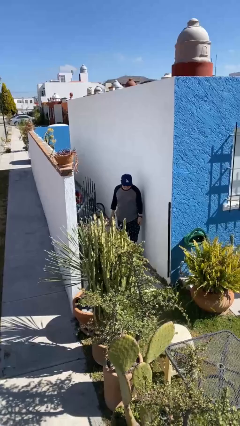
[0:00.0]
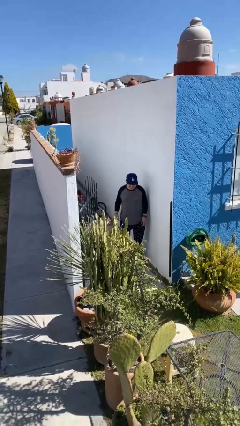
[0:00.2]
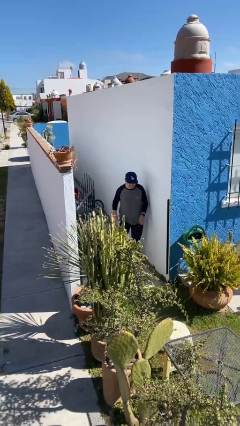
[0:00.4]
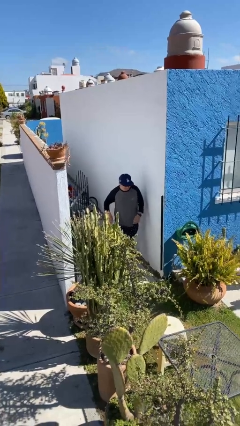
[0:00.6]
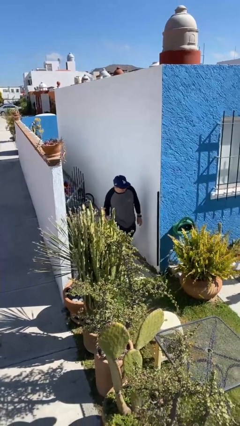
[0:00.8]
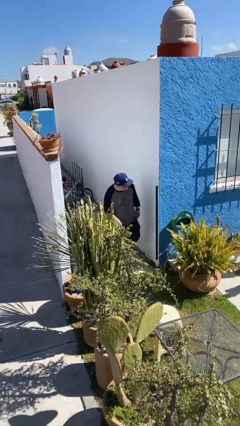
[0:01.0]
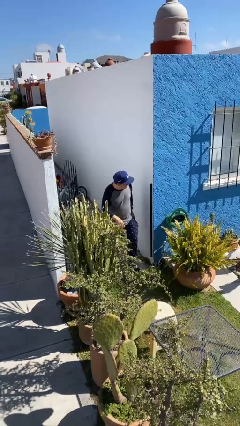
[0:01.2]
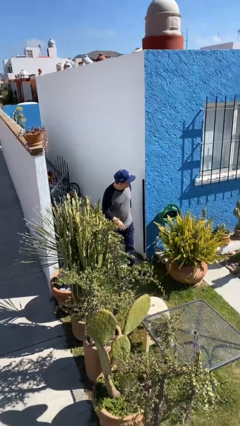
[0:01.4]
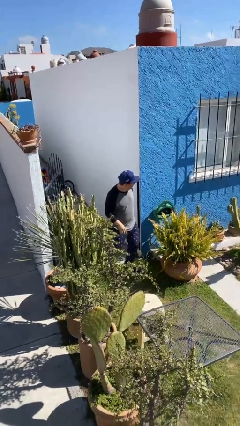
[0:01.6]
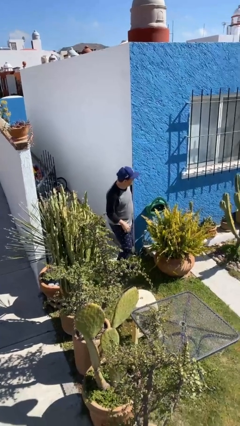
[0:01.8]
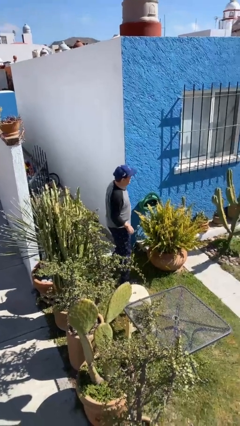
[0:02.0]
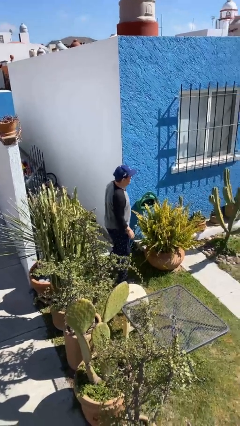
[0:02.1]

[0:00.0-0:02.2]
person enters scene through structure

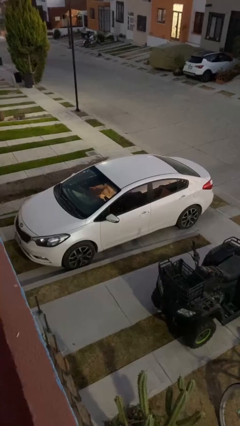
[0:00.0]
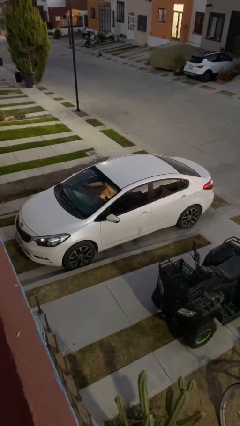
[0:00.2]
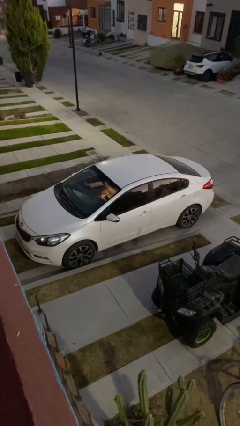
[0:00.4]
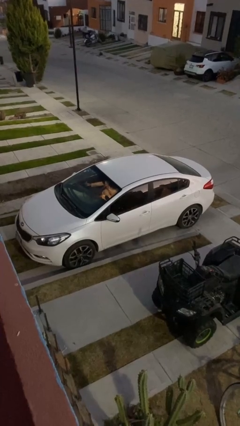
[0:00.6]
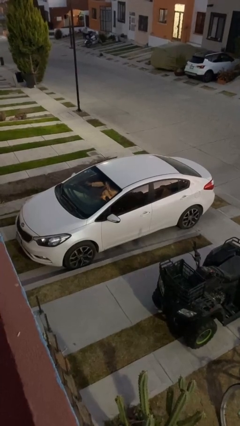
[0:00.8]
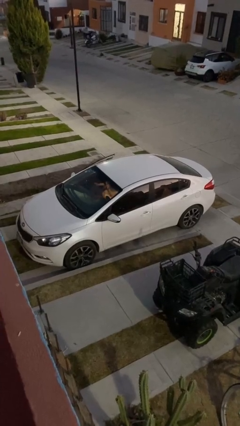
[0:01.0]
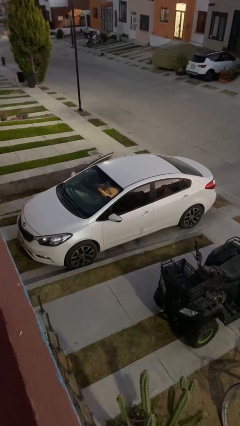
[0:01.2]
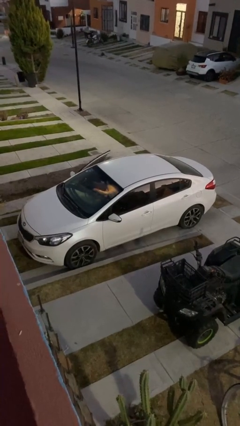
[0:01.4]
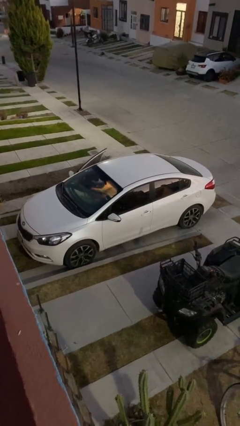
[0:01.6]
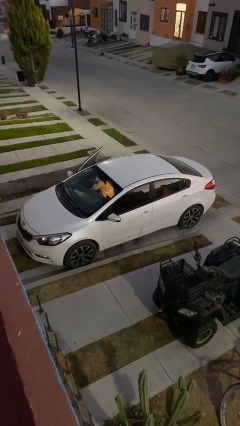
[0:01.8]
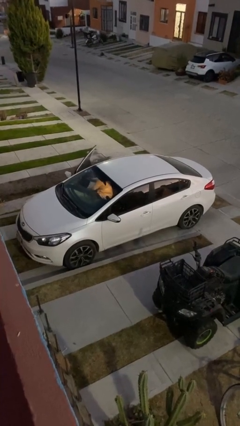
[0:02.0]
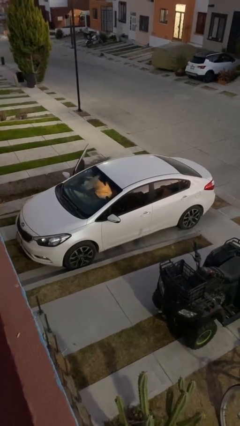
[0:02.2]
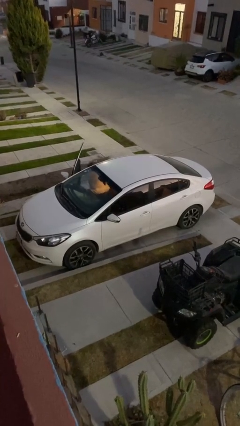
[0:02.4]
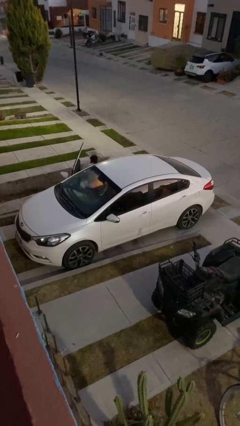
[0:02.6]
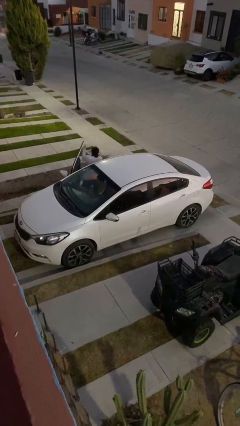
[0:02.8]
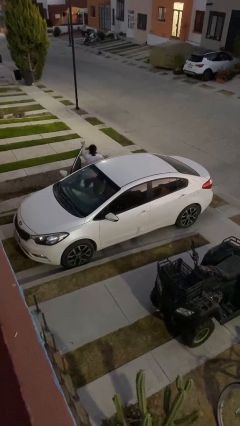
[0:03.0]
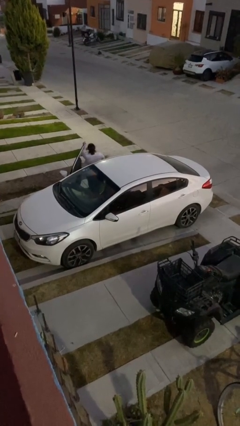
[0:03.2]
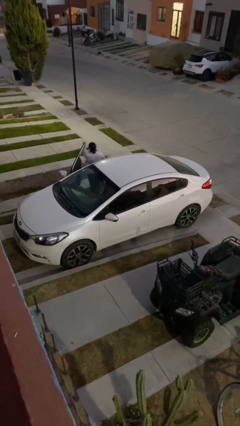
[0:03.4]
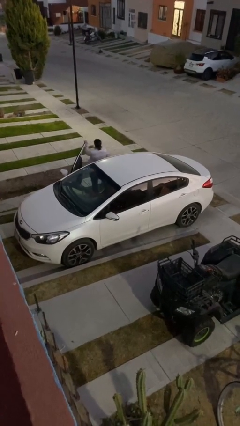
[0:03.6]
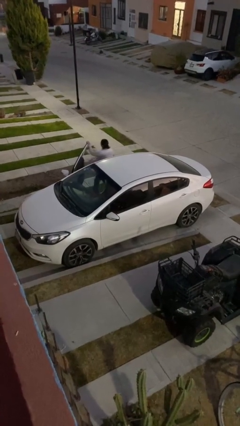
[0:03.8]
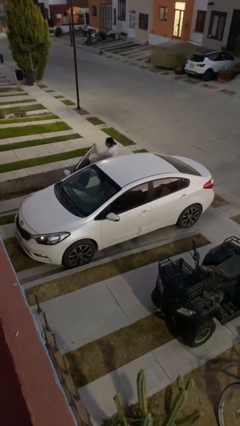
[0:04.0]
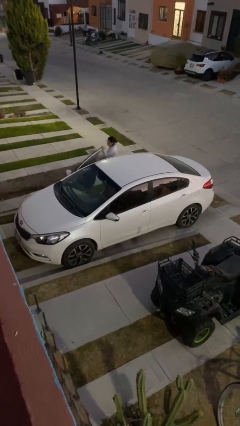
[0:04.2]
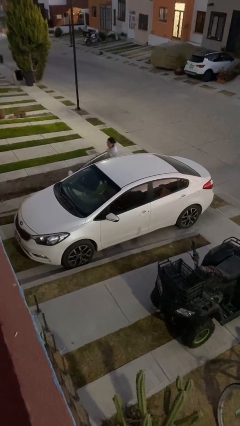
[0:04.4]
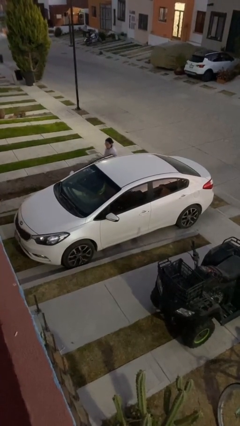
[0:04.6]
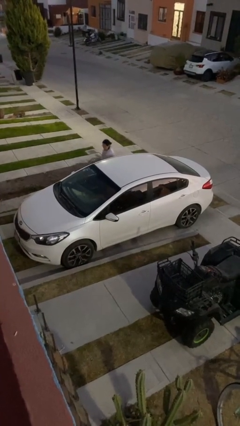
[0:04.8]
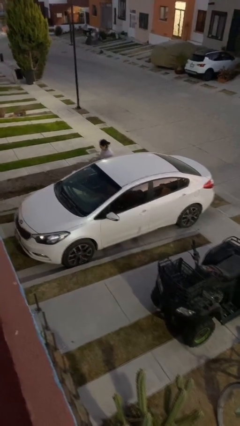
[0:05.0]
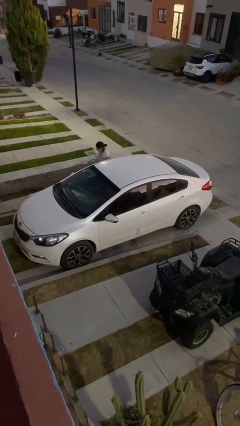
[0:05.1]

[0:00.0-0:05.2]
car drops off person

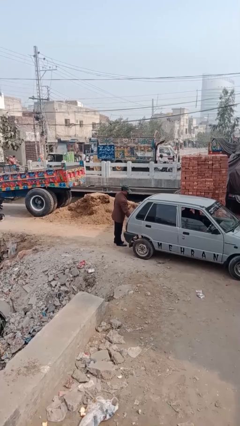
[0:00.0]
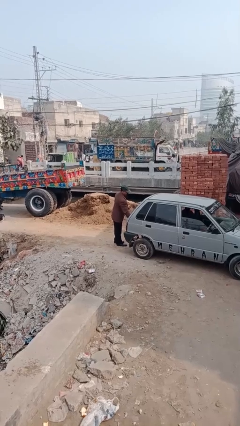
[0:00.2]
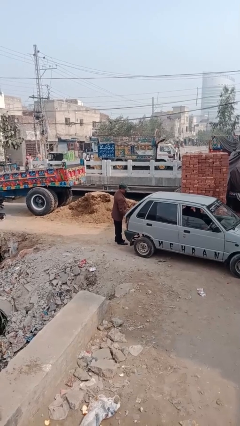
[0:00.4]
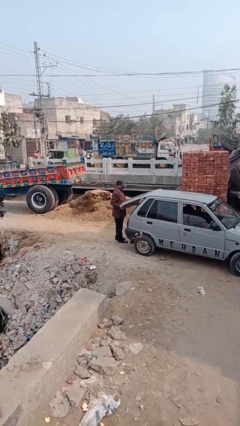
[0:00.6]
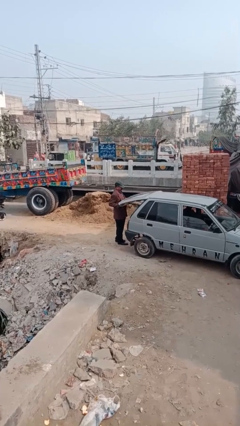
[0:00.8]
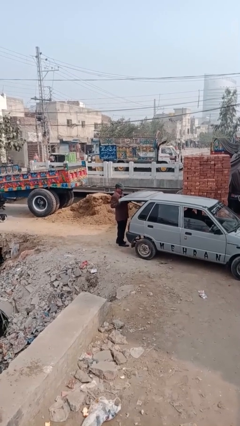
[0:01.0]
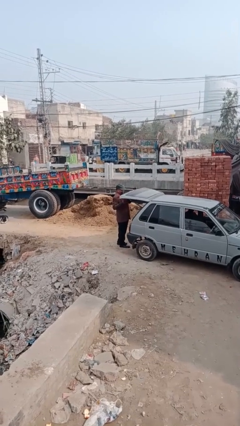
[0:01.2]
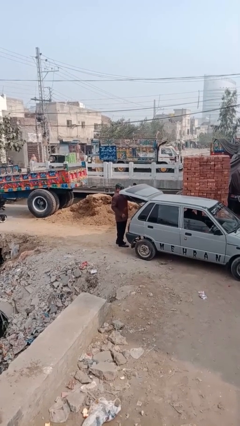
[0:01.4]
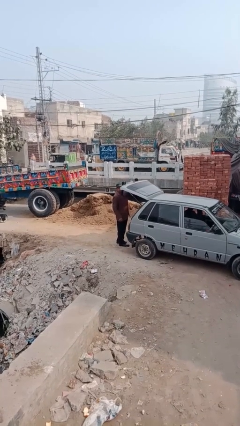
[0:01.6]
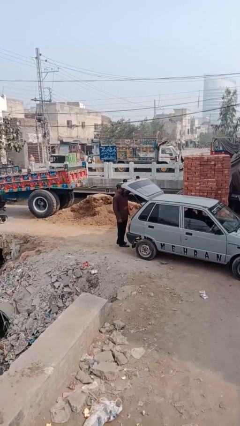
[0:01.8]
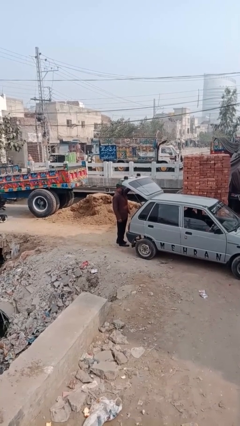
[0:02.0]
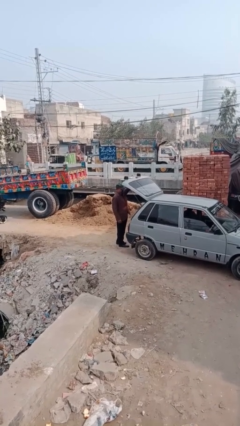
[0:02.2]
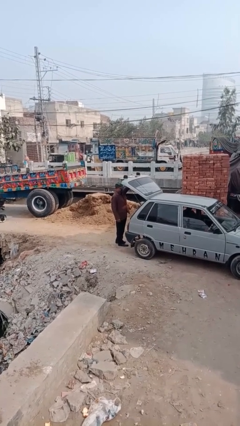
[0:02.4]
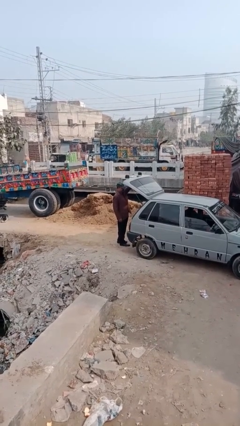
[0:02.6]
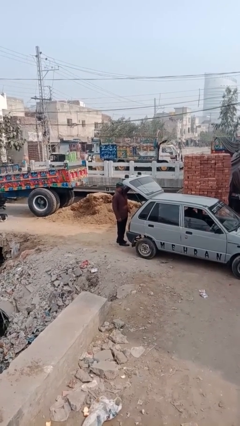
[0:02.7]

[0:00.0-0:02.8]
person opens car trunk

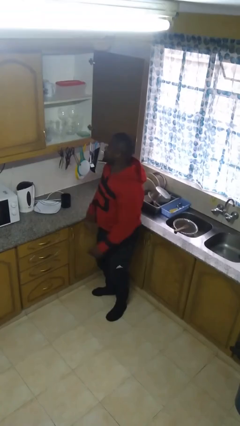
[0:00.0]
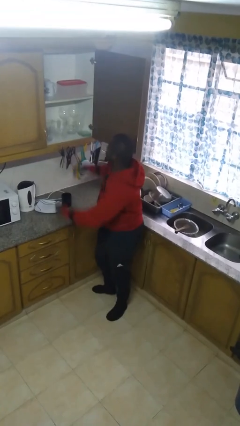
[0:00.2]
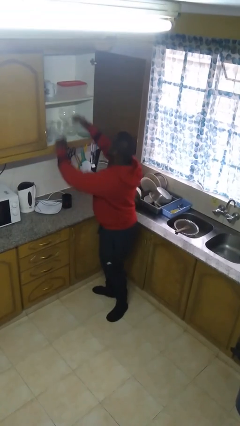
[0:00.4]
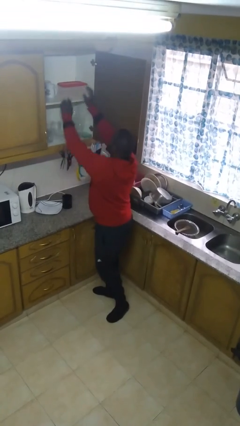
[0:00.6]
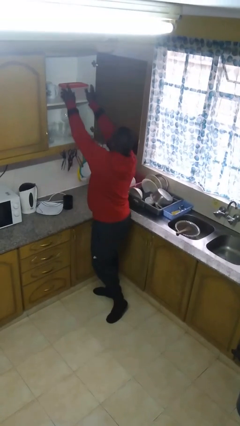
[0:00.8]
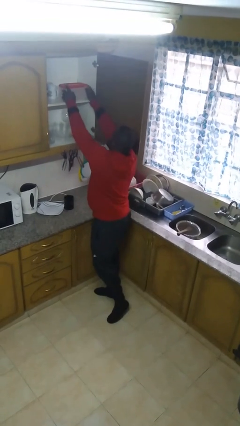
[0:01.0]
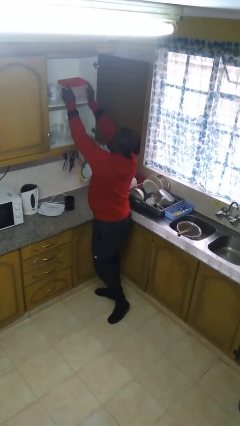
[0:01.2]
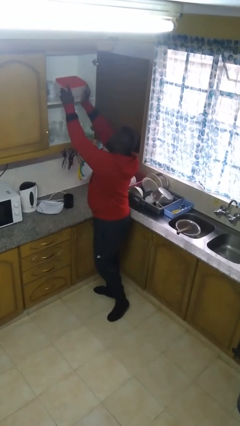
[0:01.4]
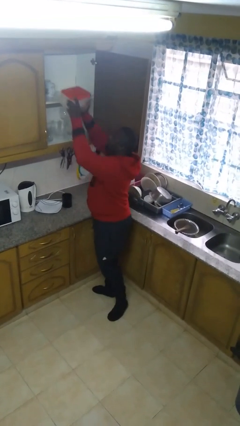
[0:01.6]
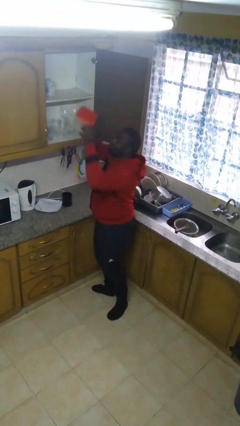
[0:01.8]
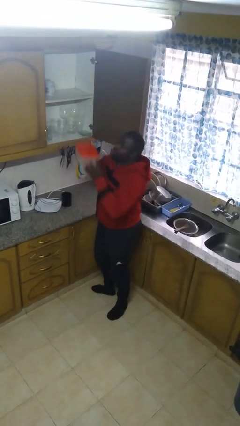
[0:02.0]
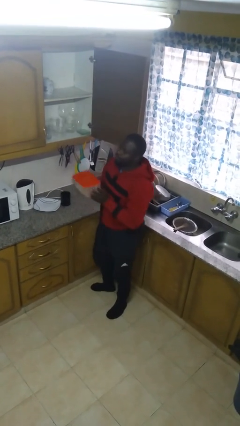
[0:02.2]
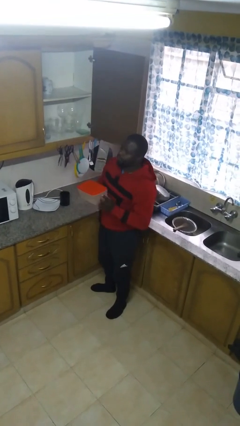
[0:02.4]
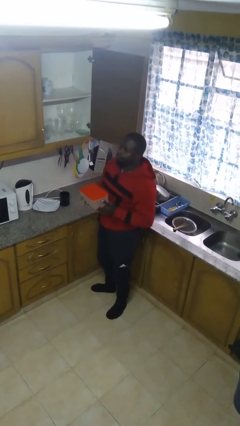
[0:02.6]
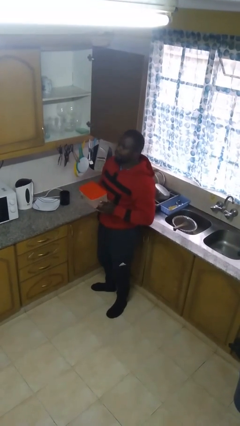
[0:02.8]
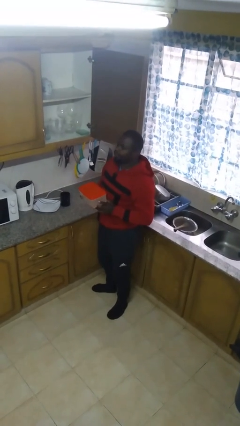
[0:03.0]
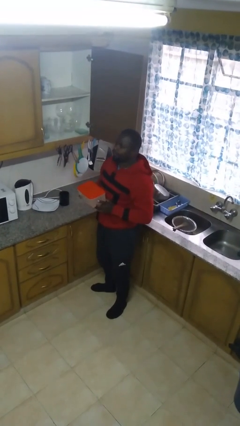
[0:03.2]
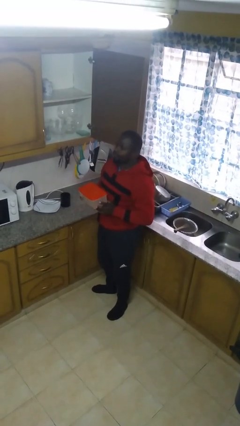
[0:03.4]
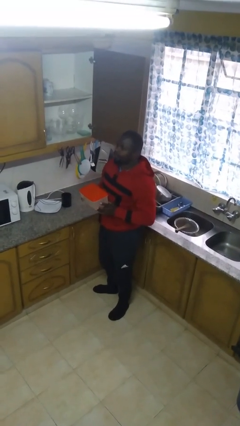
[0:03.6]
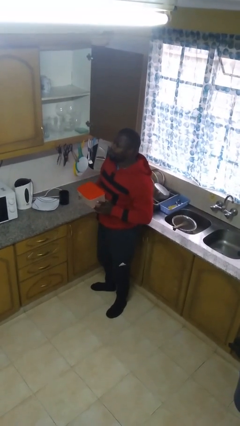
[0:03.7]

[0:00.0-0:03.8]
person picks up object from cabinet

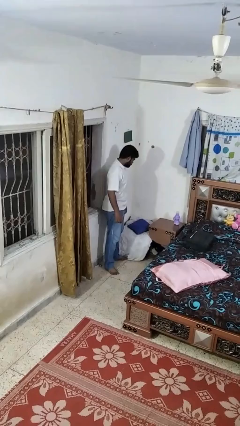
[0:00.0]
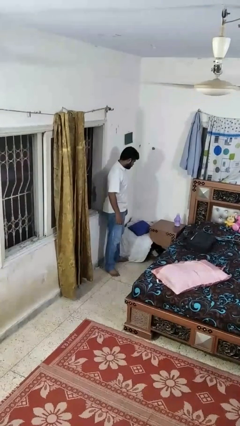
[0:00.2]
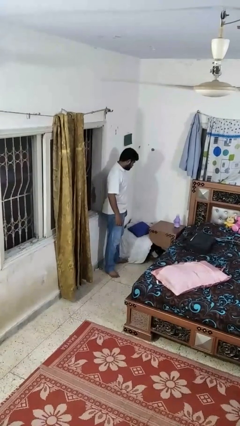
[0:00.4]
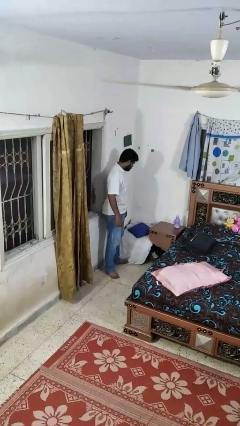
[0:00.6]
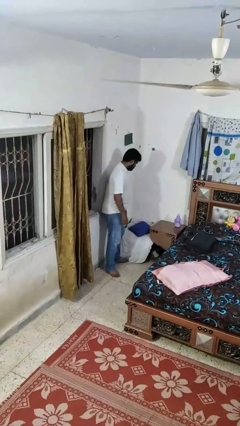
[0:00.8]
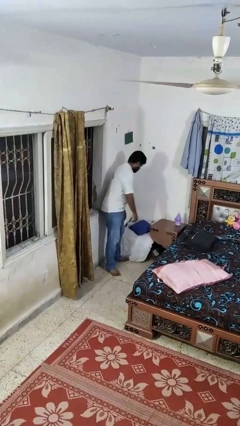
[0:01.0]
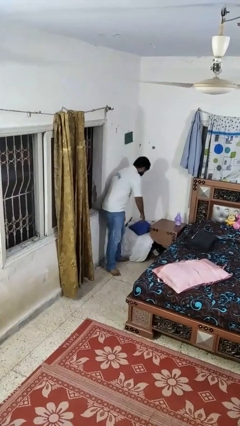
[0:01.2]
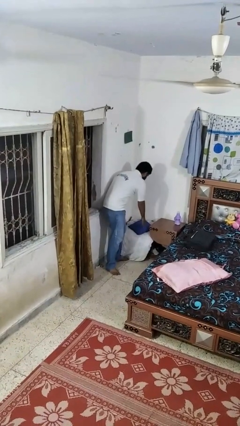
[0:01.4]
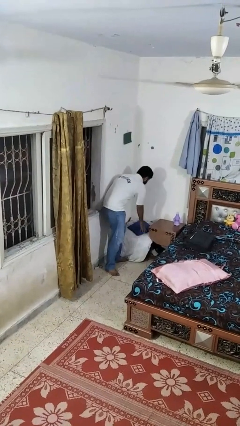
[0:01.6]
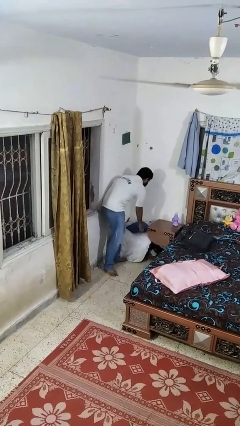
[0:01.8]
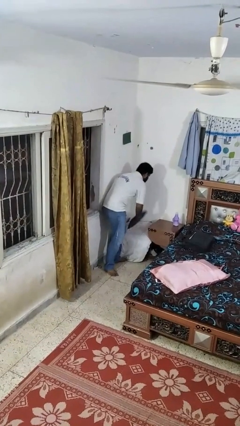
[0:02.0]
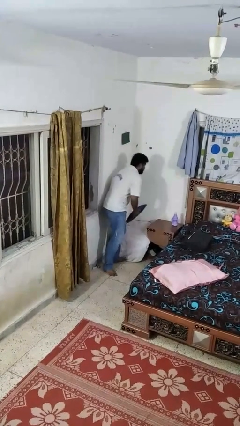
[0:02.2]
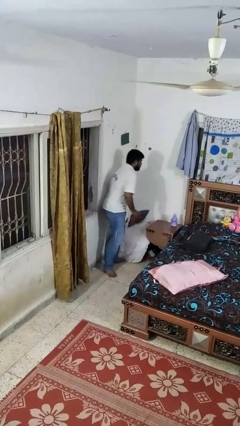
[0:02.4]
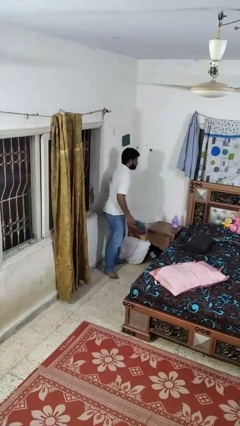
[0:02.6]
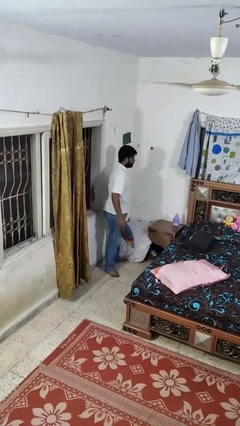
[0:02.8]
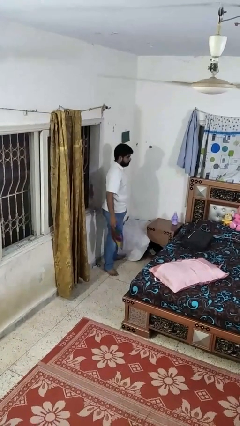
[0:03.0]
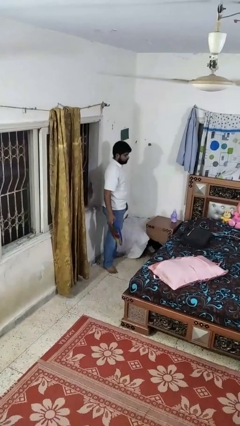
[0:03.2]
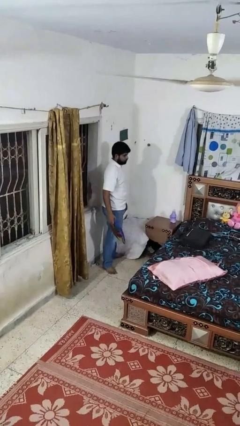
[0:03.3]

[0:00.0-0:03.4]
person picks up object from couch

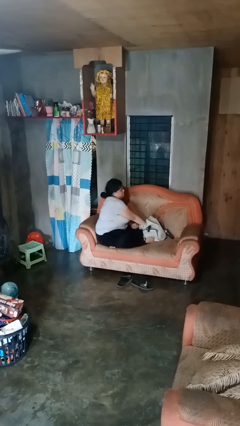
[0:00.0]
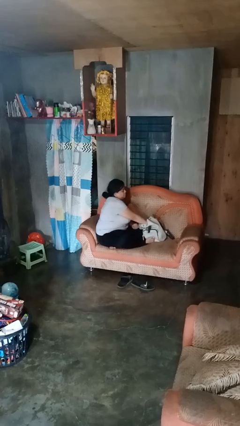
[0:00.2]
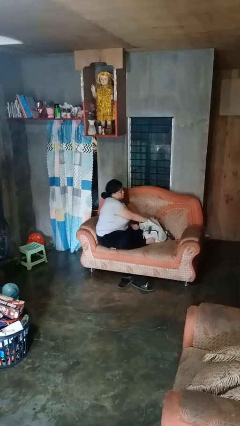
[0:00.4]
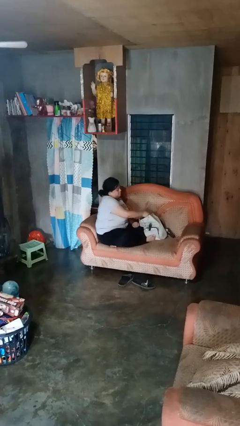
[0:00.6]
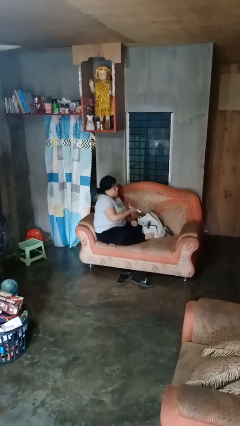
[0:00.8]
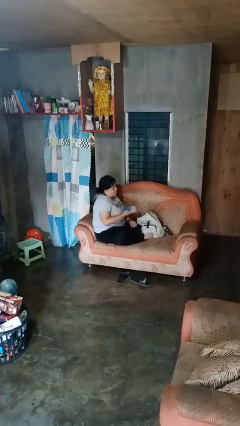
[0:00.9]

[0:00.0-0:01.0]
person takes object from backpack
